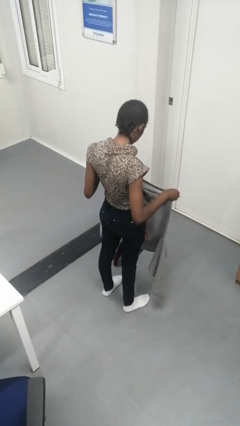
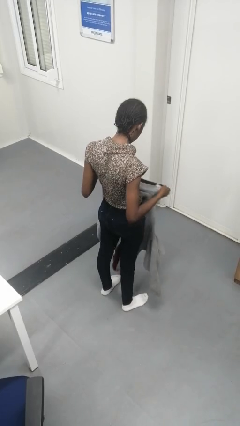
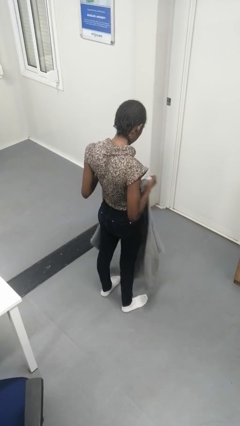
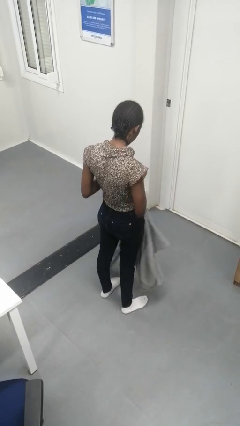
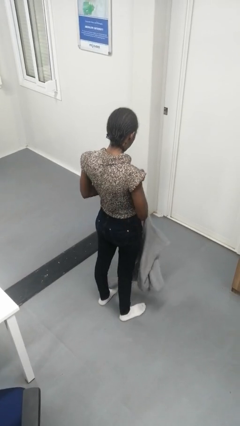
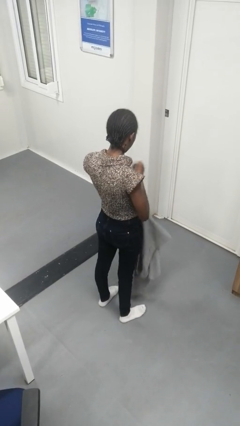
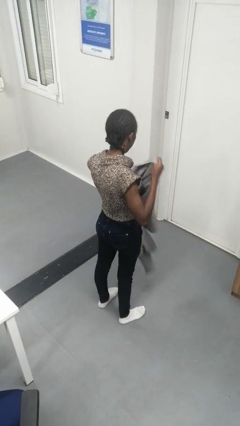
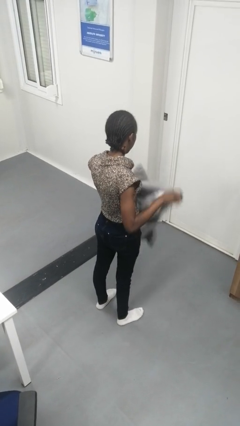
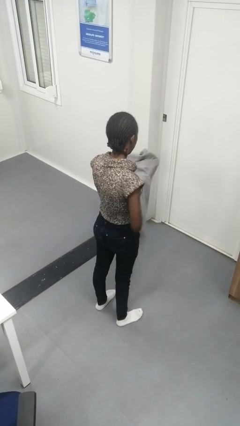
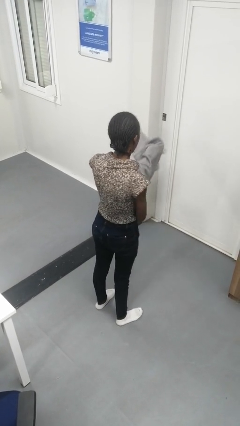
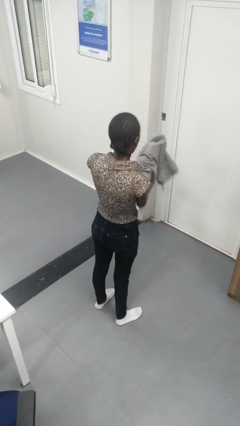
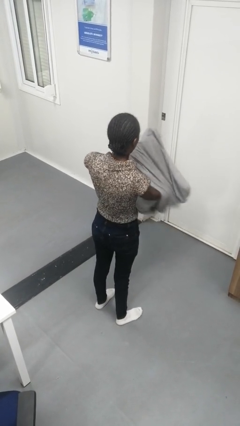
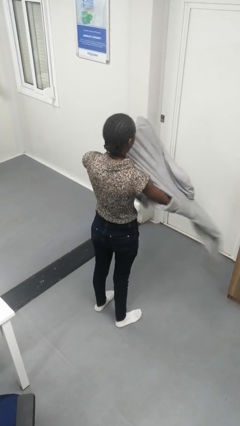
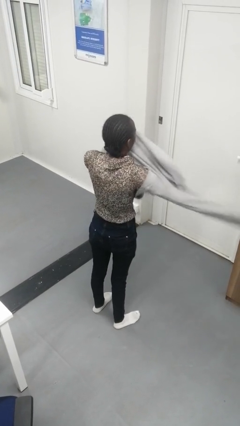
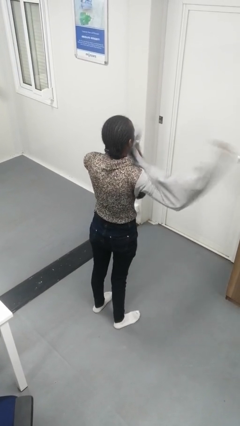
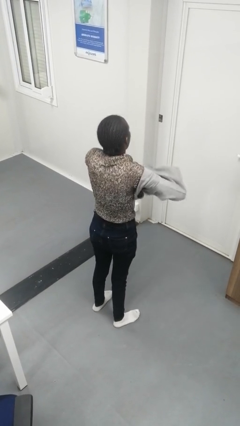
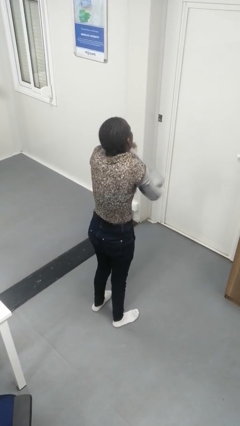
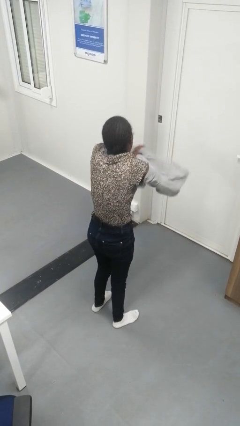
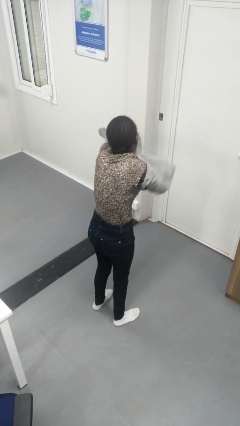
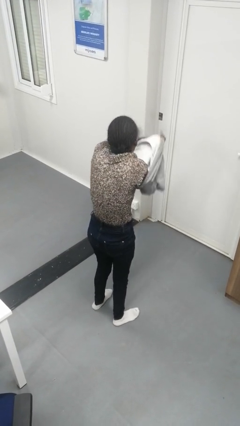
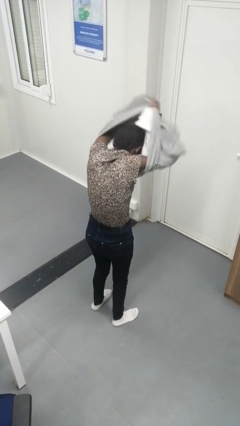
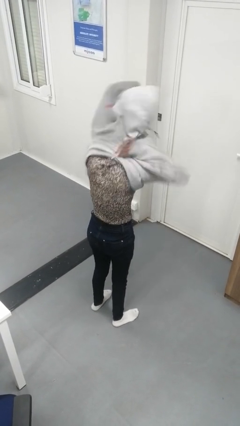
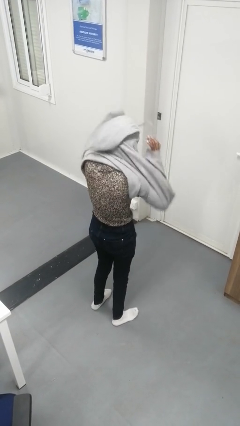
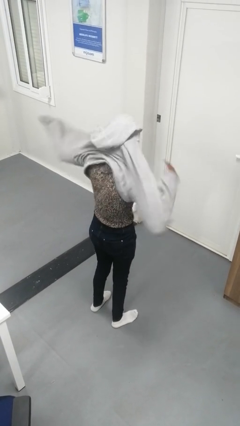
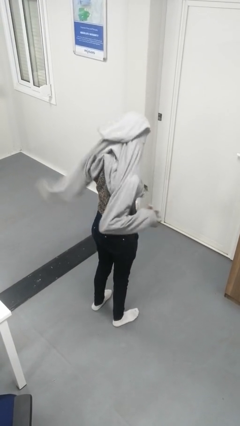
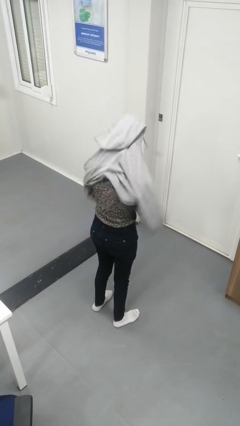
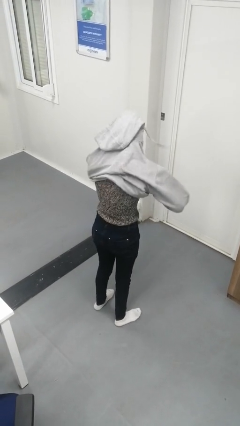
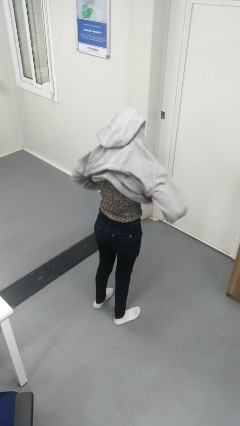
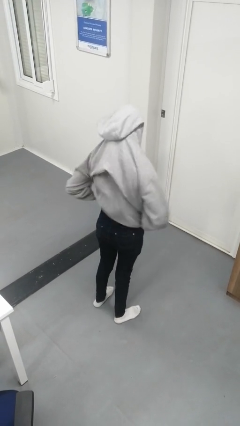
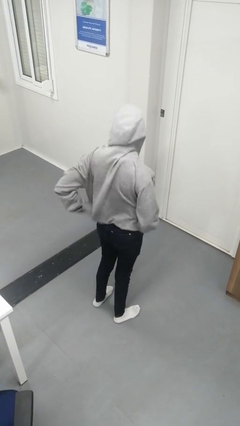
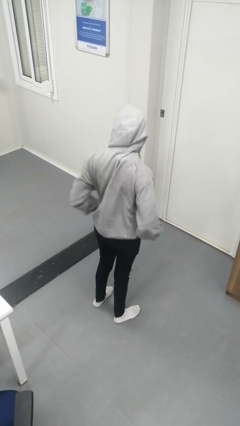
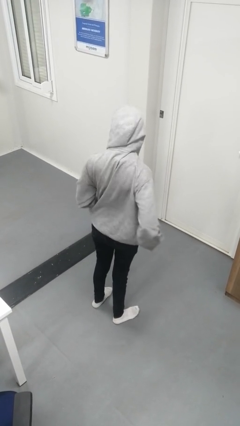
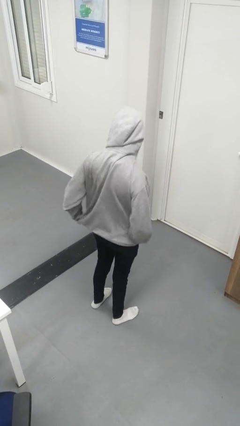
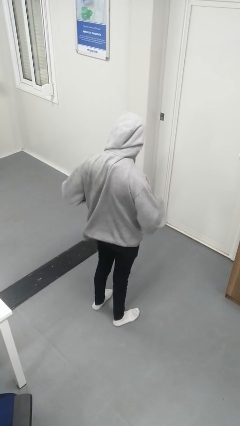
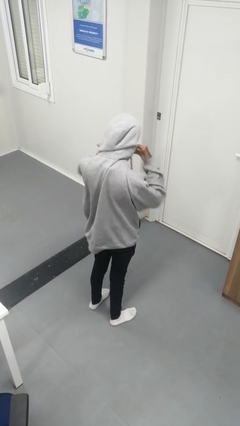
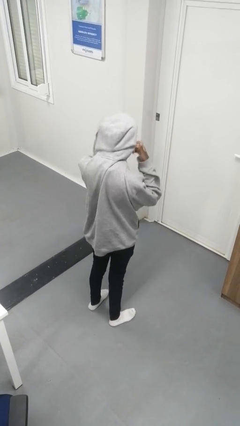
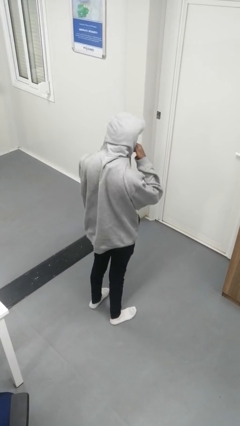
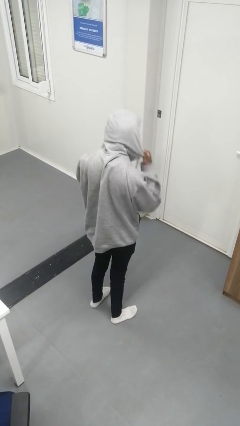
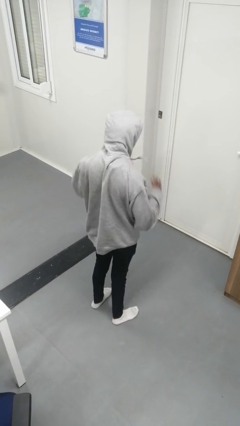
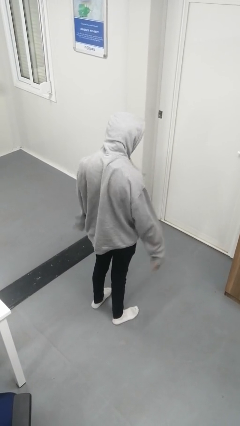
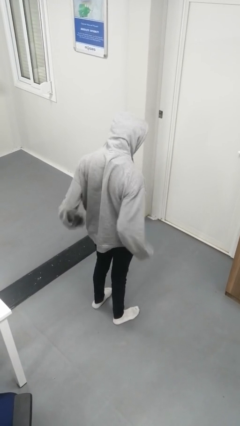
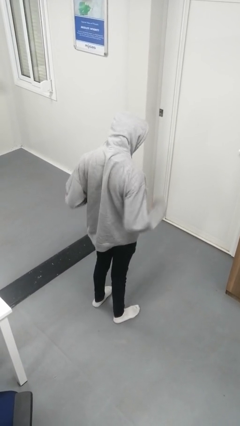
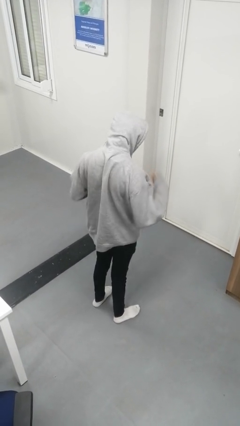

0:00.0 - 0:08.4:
person puts on hoodie

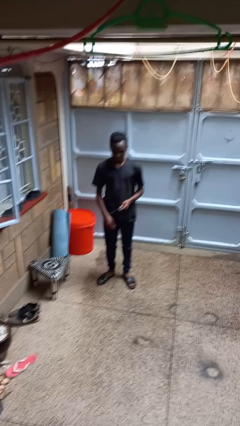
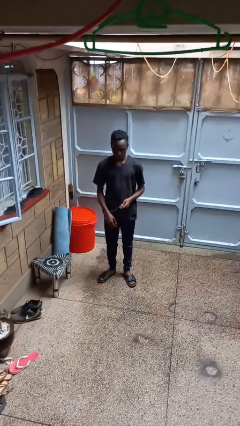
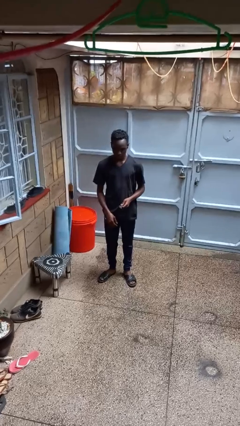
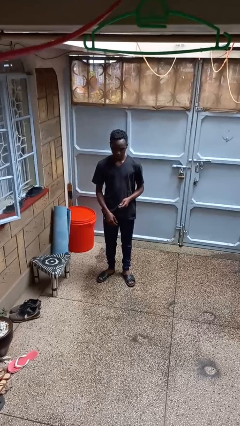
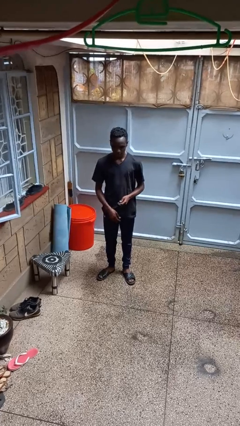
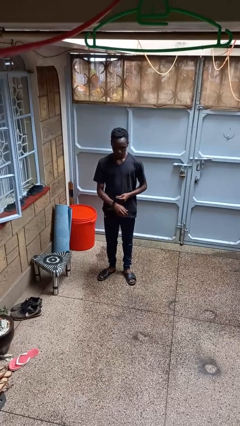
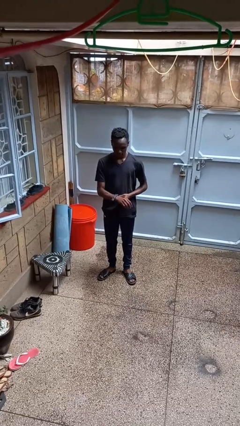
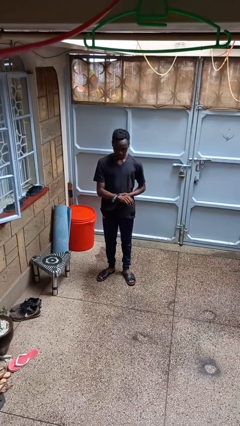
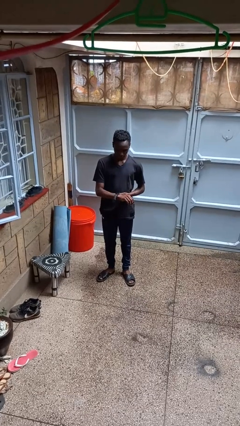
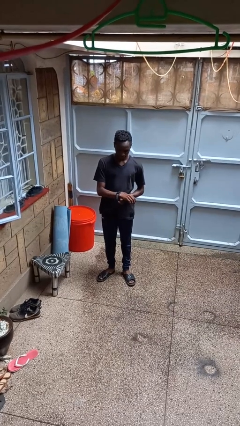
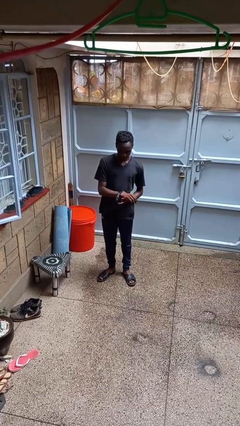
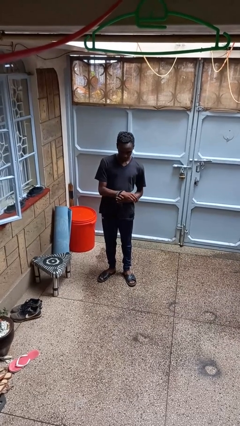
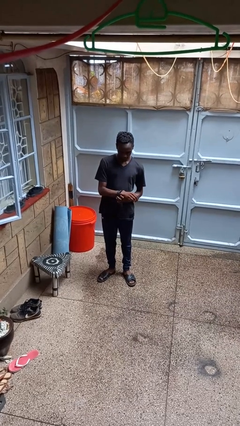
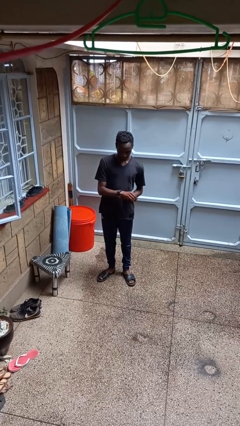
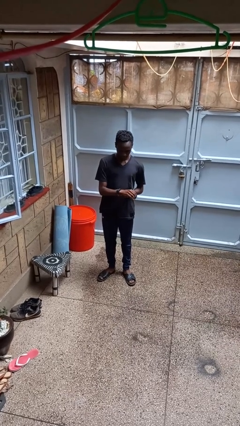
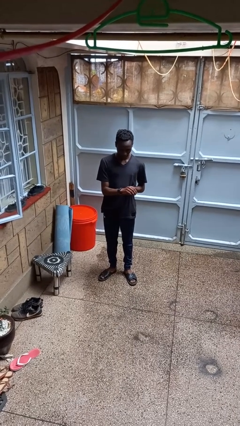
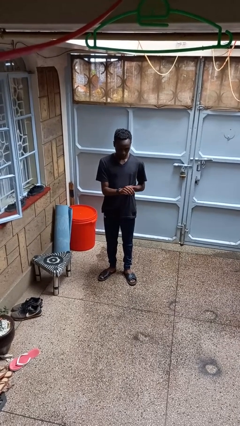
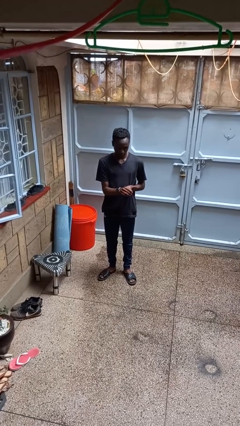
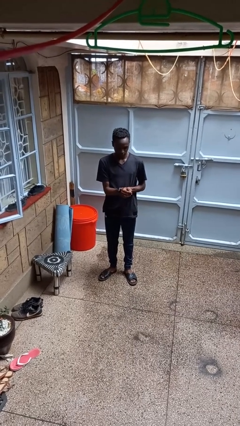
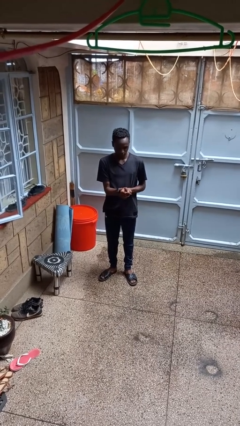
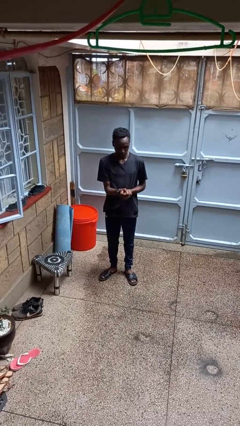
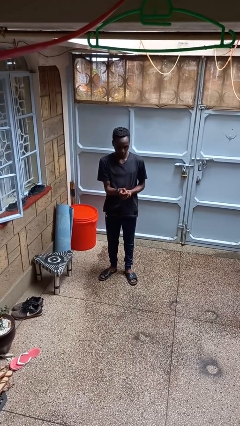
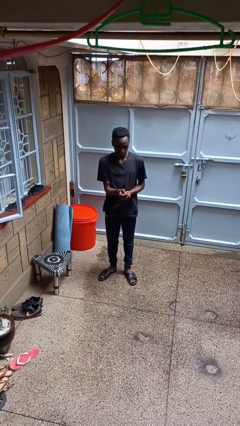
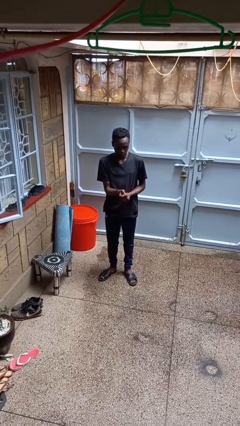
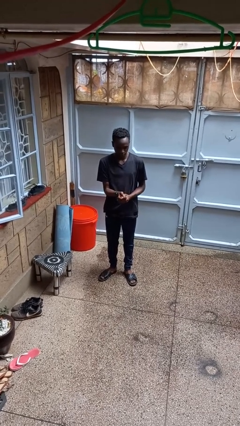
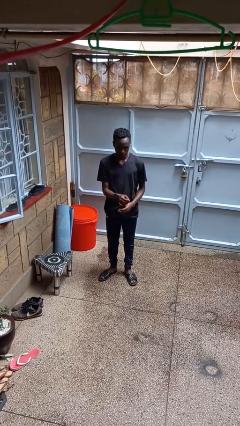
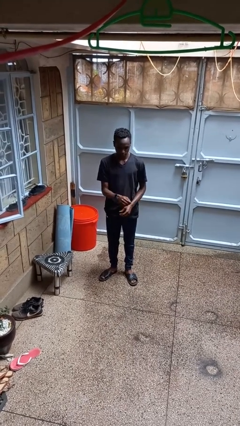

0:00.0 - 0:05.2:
person puts on wristwatch

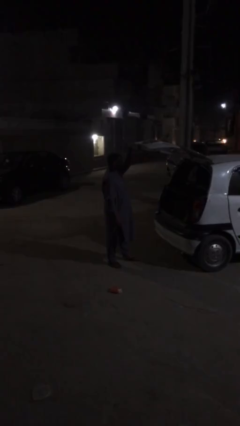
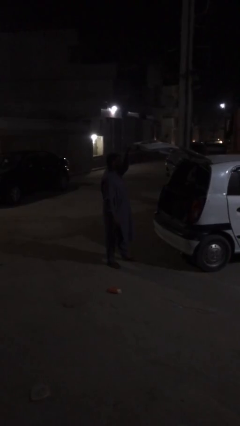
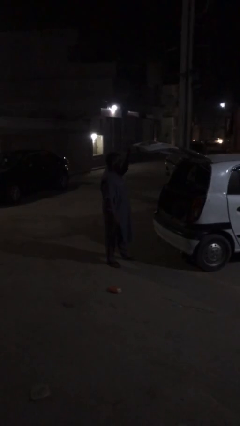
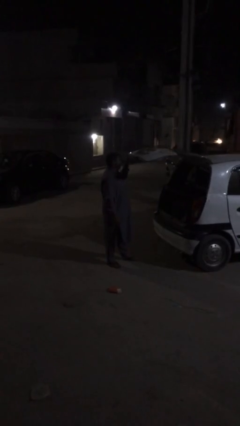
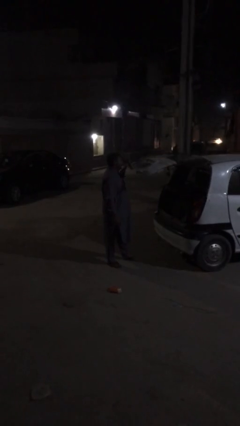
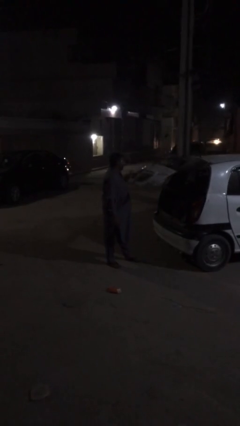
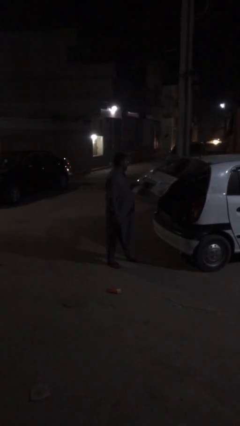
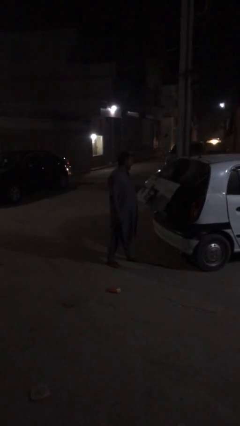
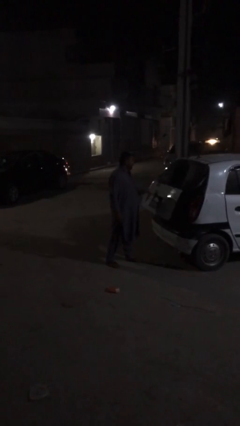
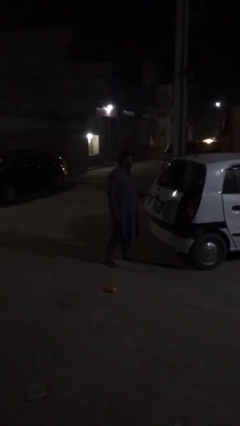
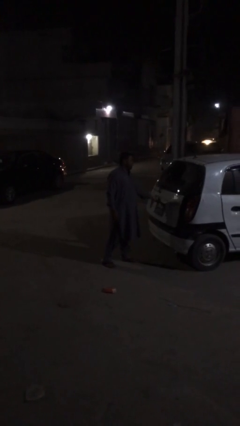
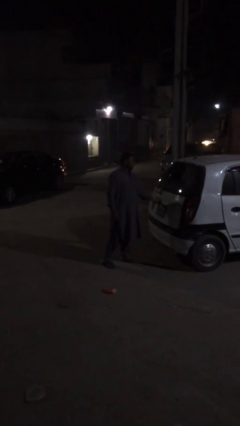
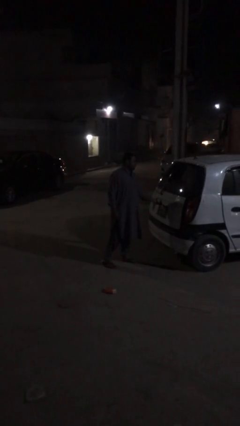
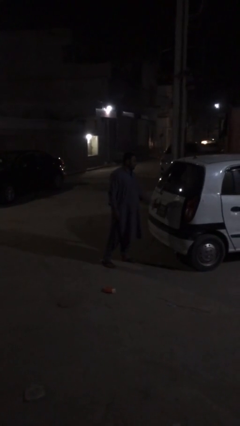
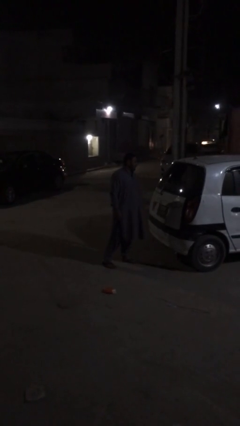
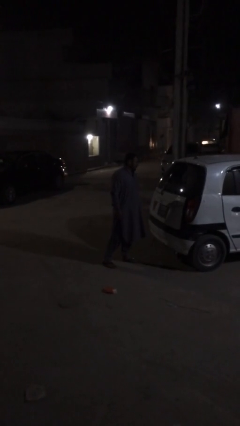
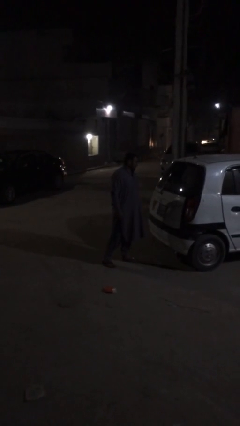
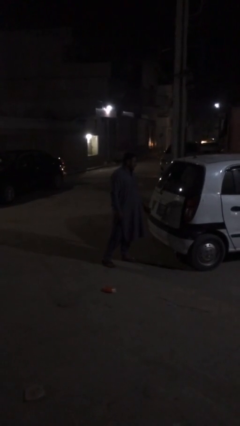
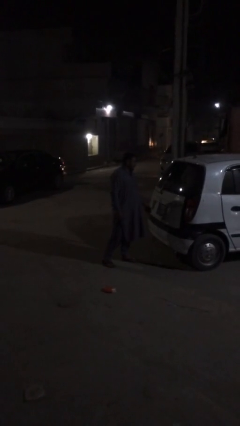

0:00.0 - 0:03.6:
person closes car trunk

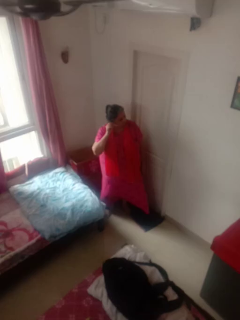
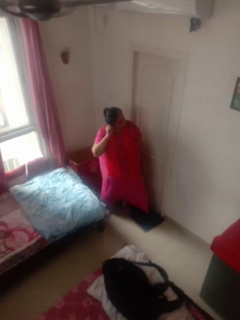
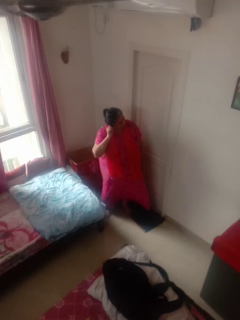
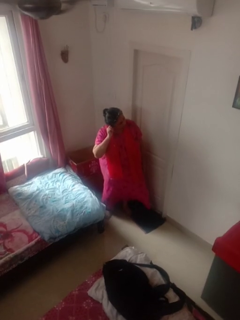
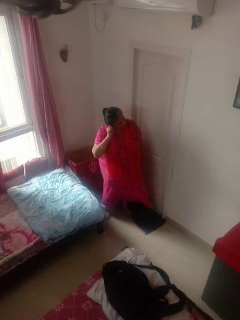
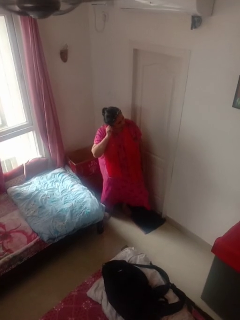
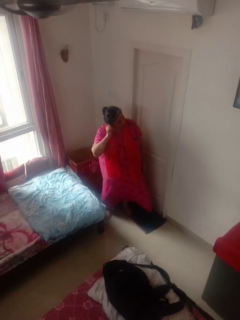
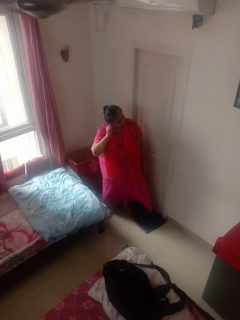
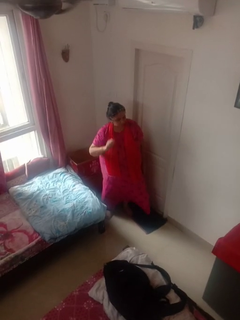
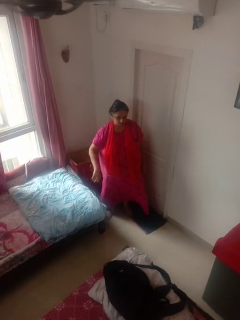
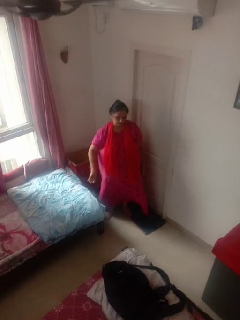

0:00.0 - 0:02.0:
person touches earlobe
